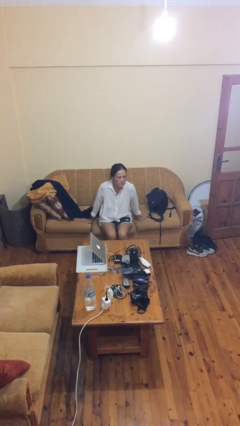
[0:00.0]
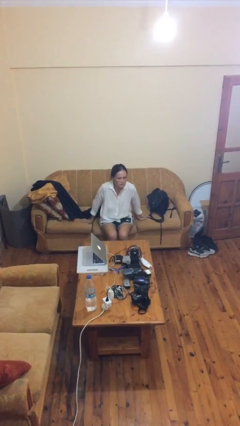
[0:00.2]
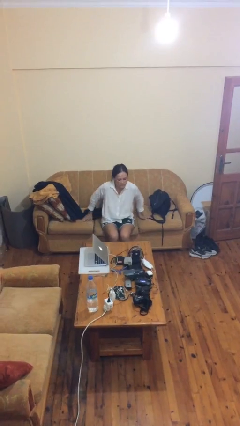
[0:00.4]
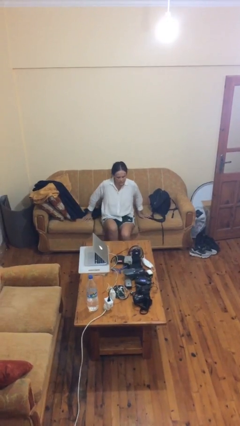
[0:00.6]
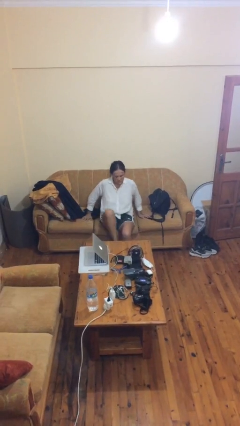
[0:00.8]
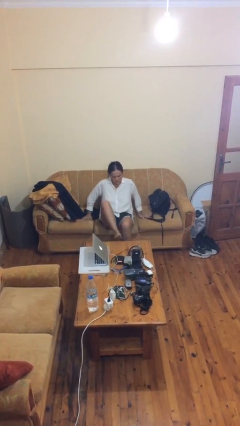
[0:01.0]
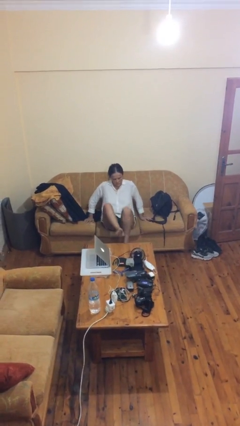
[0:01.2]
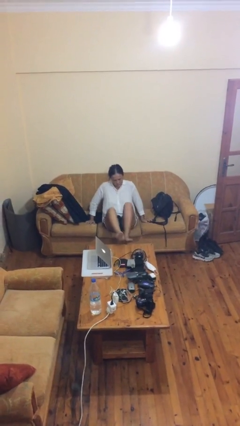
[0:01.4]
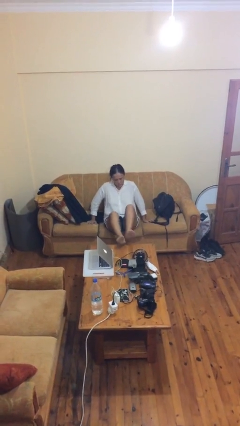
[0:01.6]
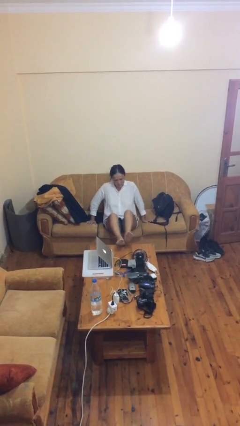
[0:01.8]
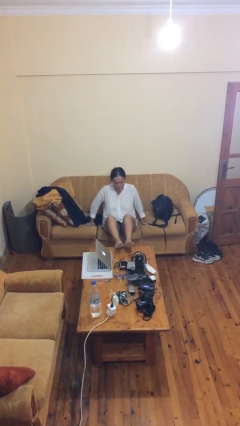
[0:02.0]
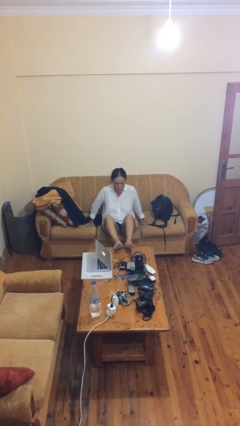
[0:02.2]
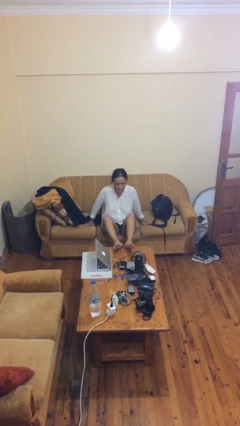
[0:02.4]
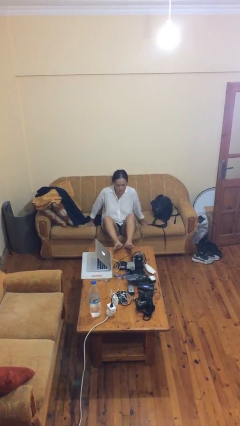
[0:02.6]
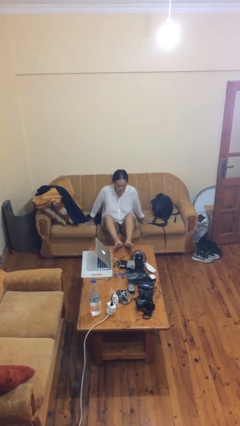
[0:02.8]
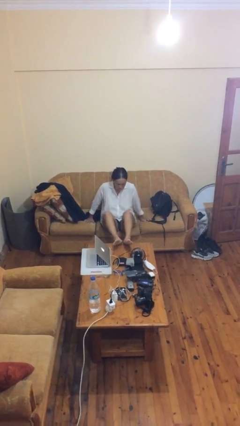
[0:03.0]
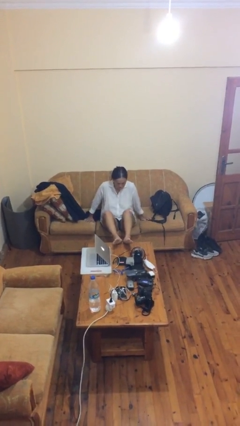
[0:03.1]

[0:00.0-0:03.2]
person puts feet up

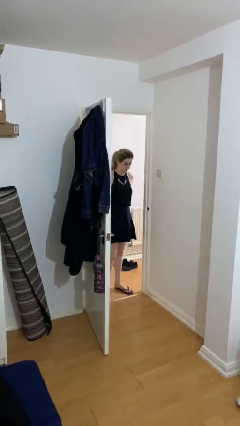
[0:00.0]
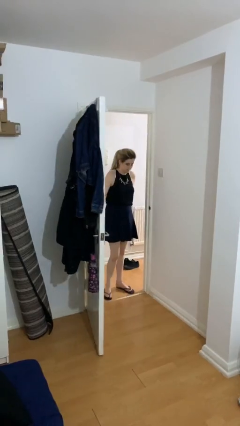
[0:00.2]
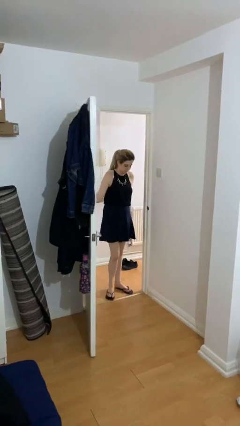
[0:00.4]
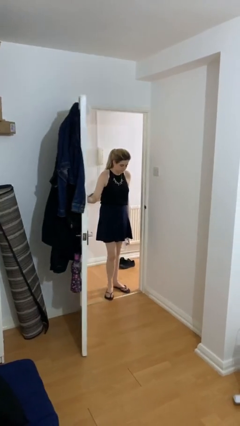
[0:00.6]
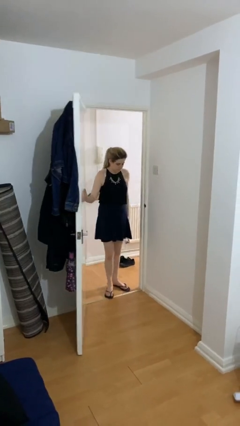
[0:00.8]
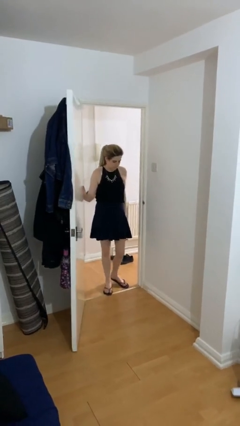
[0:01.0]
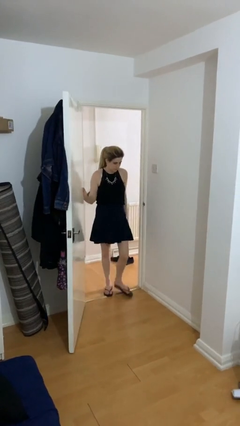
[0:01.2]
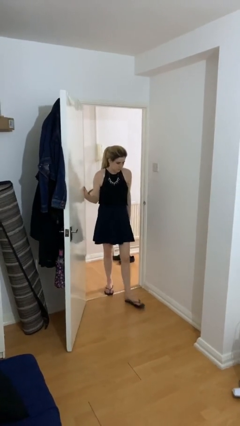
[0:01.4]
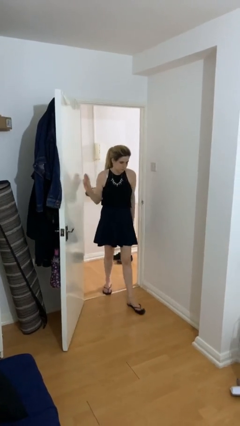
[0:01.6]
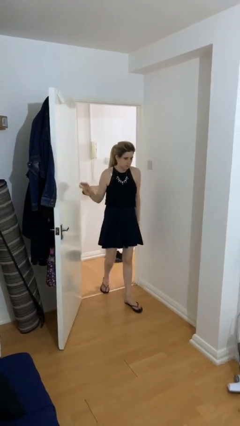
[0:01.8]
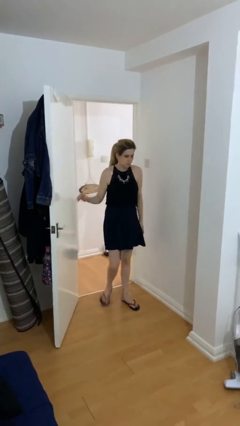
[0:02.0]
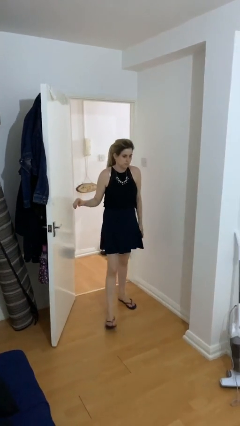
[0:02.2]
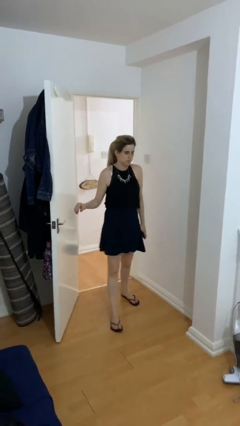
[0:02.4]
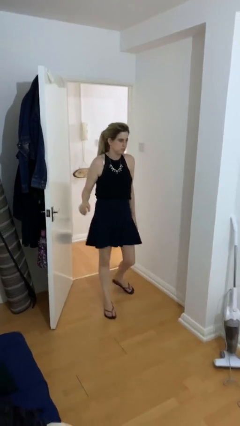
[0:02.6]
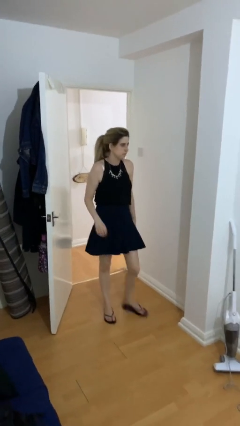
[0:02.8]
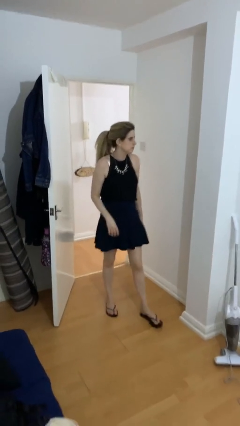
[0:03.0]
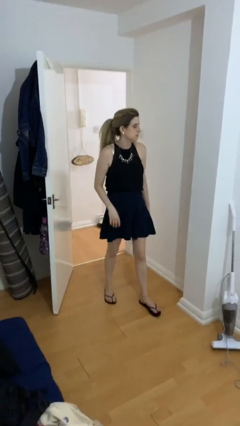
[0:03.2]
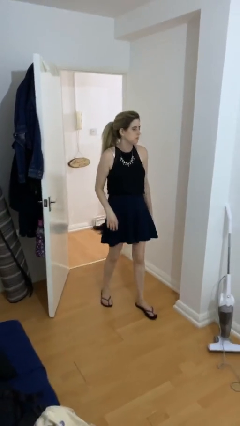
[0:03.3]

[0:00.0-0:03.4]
person enters scene through structure

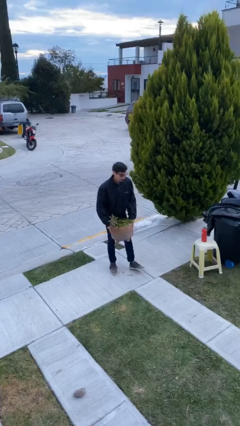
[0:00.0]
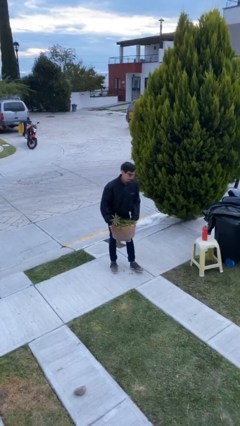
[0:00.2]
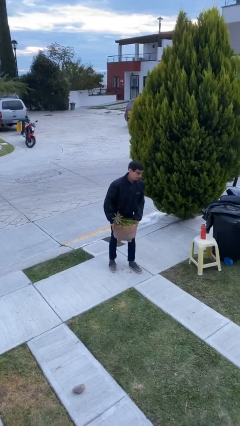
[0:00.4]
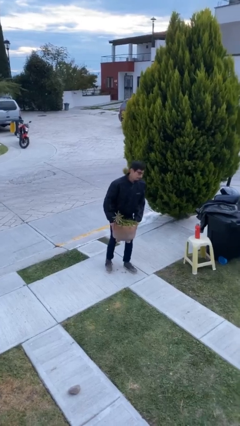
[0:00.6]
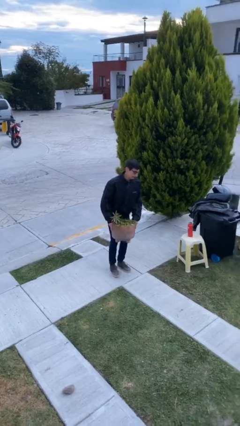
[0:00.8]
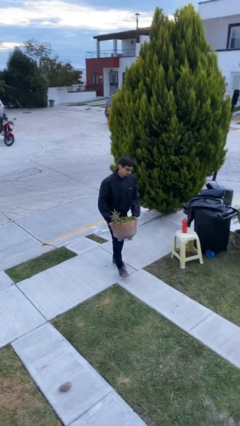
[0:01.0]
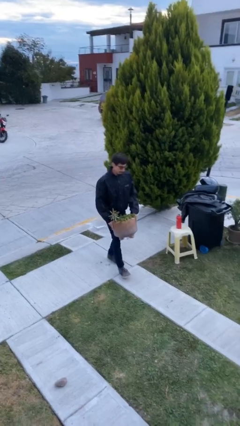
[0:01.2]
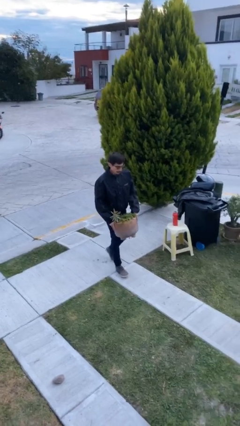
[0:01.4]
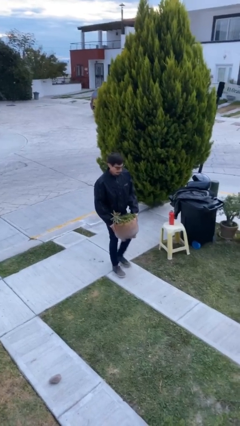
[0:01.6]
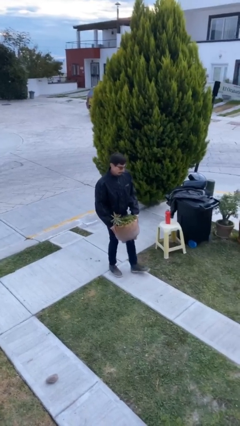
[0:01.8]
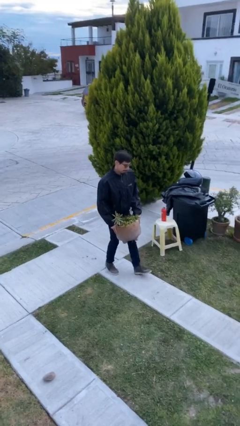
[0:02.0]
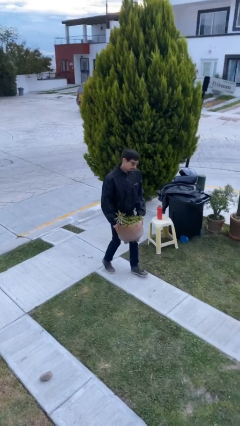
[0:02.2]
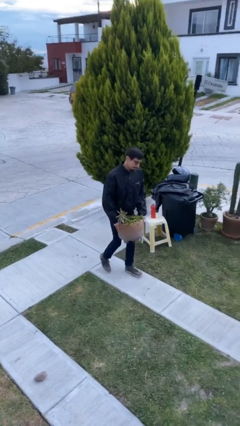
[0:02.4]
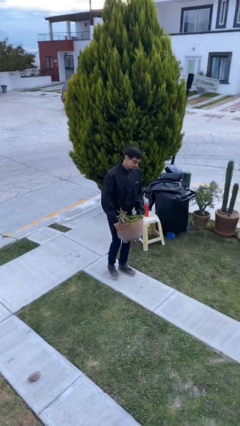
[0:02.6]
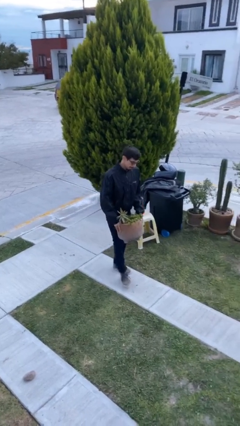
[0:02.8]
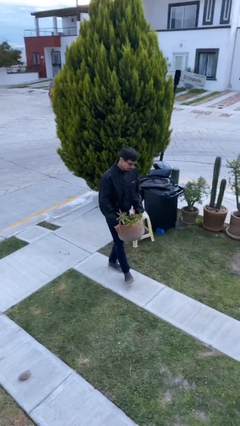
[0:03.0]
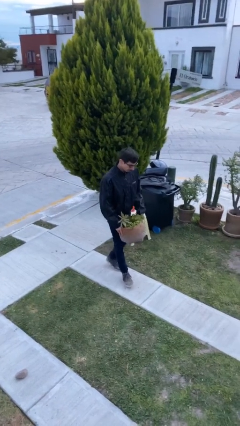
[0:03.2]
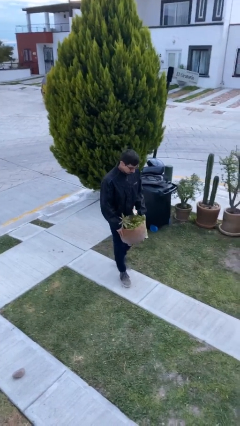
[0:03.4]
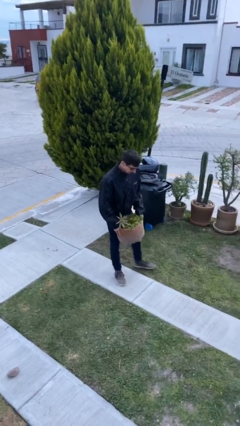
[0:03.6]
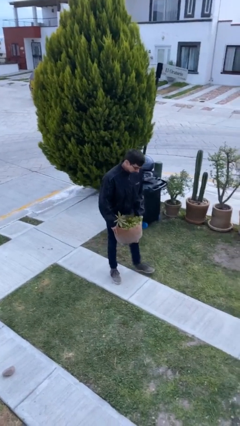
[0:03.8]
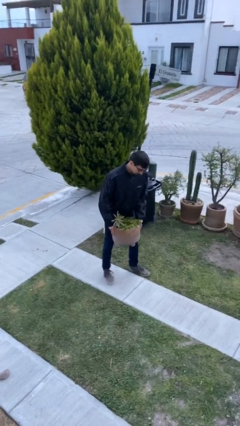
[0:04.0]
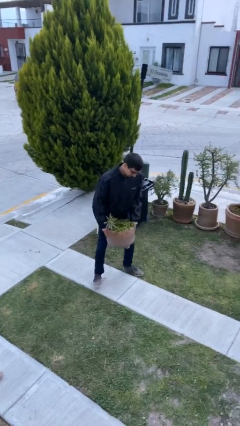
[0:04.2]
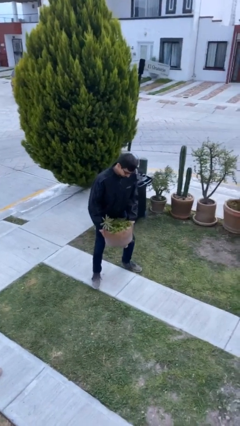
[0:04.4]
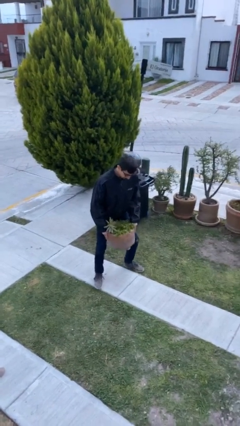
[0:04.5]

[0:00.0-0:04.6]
person carries heavy object

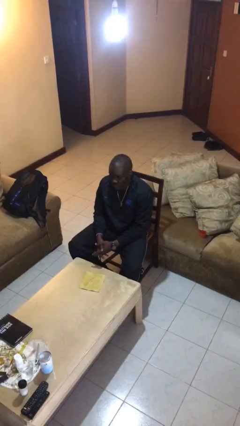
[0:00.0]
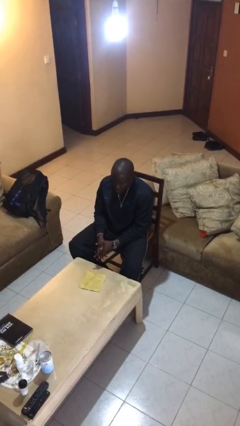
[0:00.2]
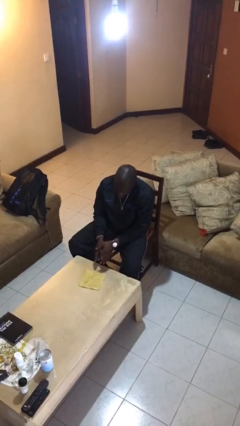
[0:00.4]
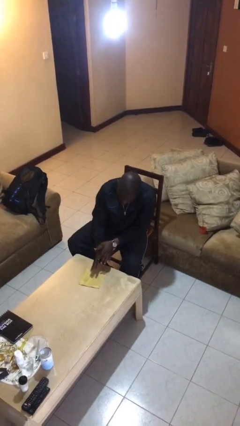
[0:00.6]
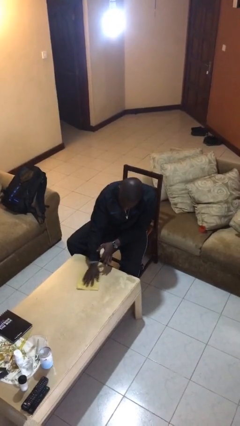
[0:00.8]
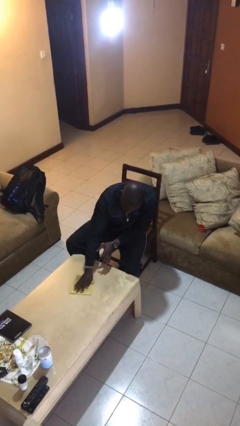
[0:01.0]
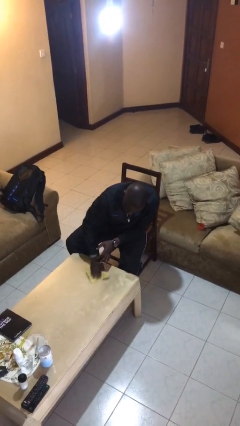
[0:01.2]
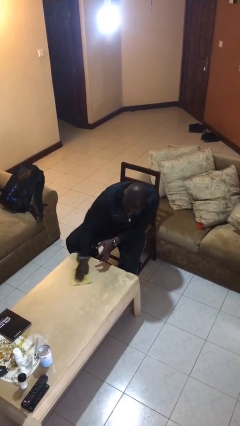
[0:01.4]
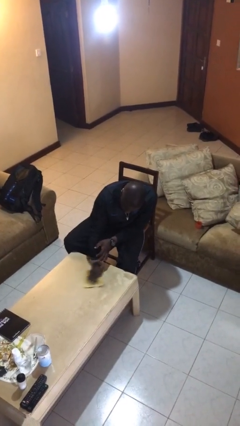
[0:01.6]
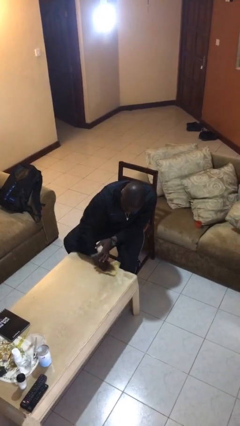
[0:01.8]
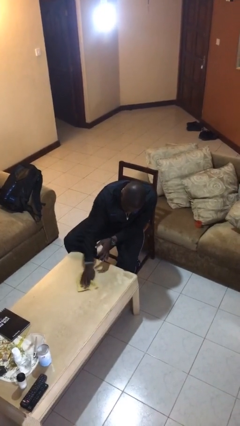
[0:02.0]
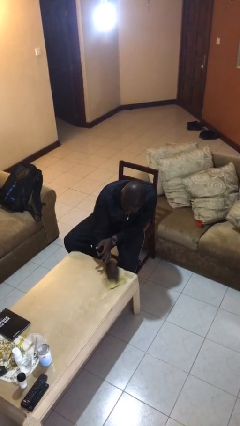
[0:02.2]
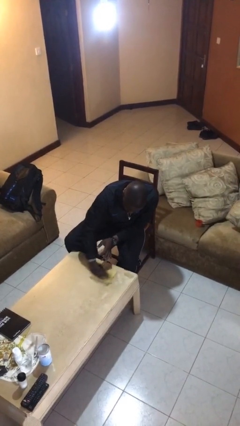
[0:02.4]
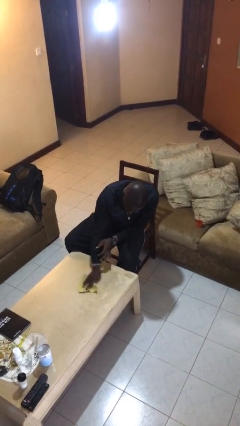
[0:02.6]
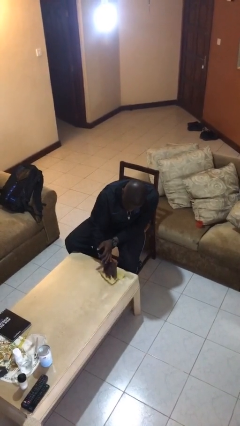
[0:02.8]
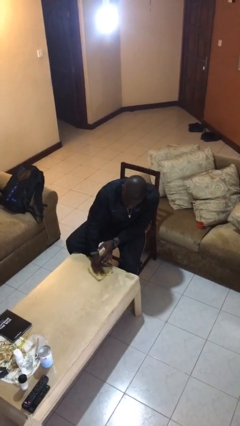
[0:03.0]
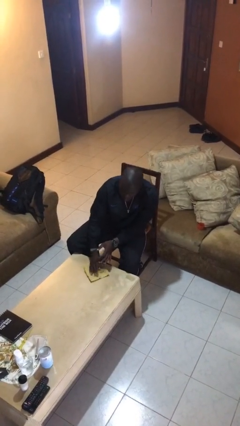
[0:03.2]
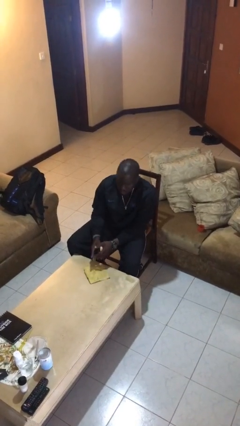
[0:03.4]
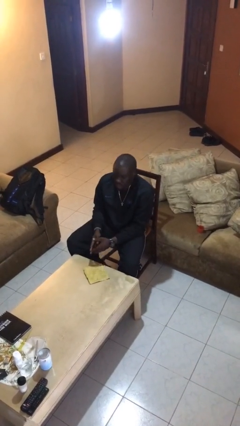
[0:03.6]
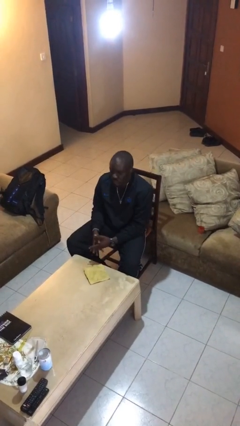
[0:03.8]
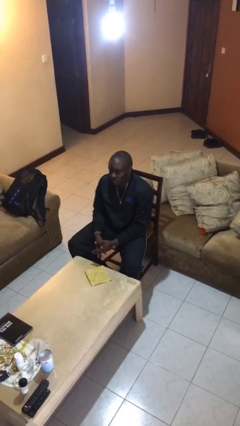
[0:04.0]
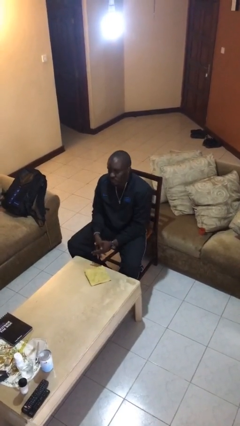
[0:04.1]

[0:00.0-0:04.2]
person cleans table with rag

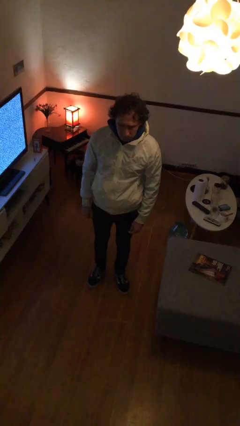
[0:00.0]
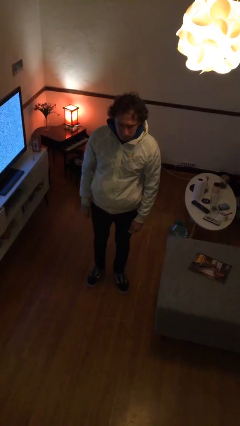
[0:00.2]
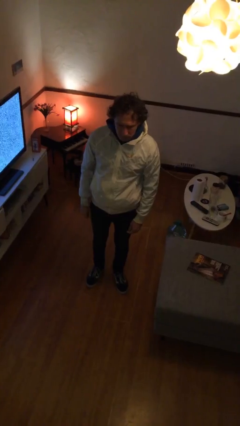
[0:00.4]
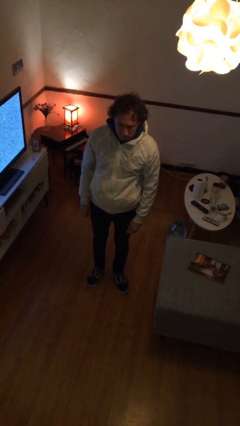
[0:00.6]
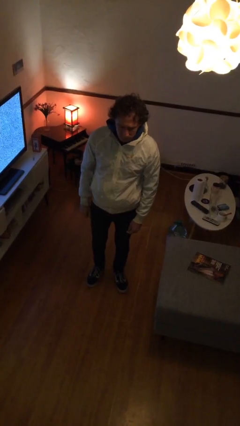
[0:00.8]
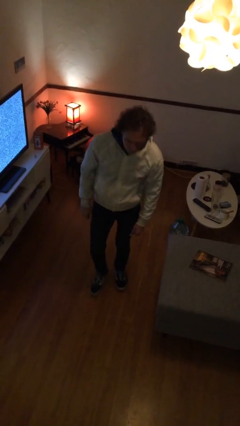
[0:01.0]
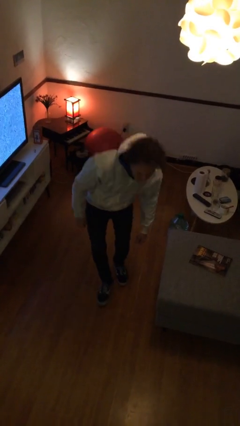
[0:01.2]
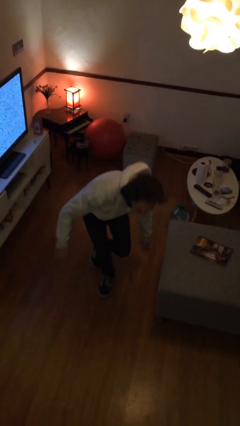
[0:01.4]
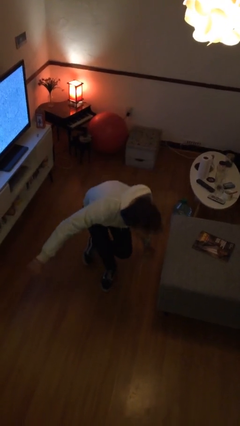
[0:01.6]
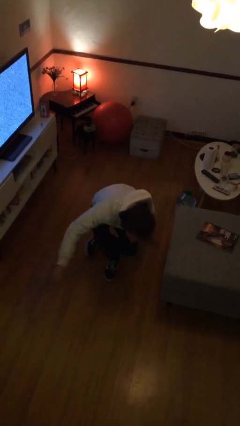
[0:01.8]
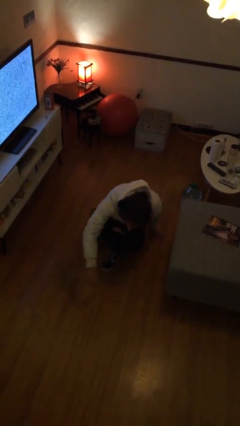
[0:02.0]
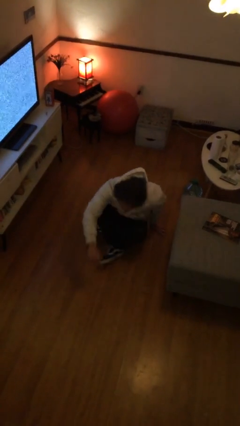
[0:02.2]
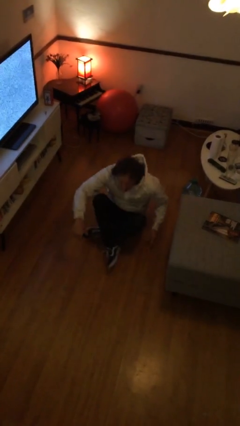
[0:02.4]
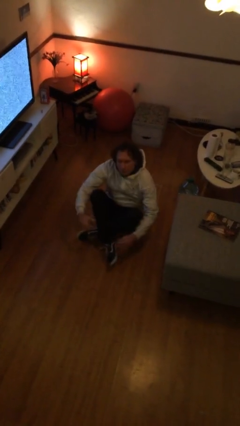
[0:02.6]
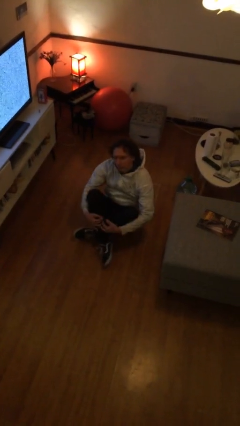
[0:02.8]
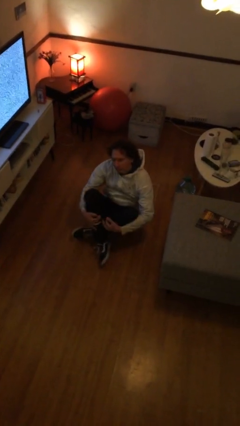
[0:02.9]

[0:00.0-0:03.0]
person sits crisscross
